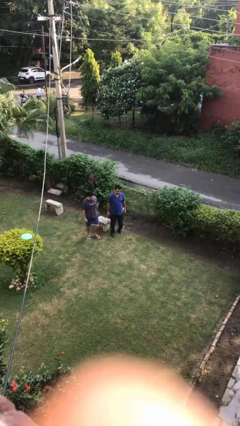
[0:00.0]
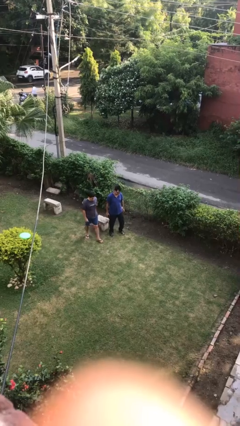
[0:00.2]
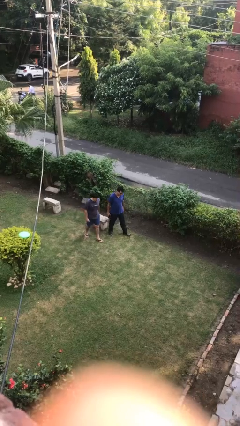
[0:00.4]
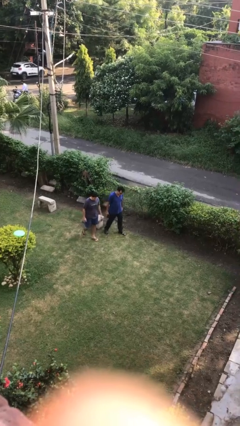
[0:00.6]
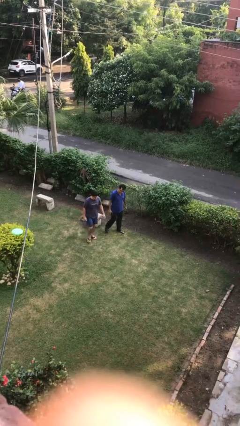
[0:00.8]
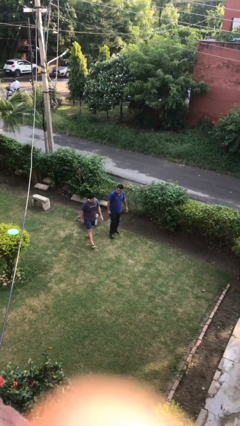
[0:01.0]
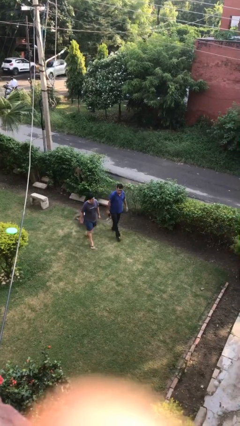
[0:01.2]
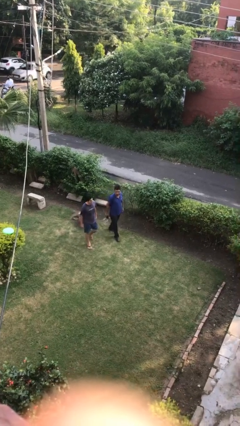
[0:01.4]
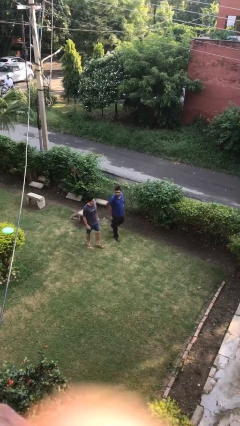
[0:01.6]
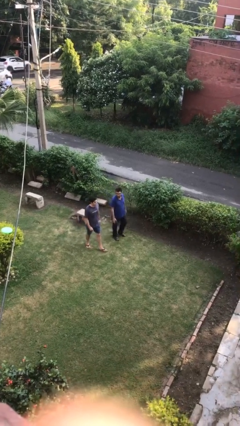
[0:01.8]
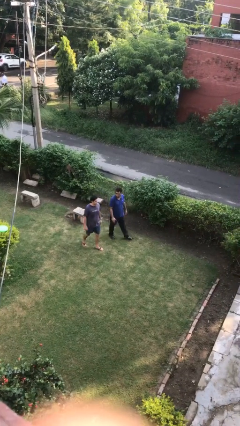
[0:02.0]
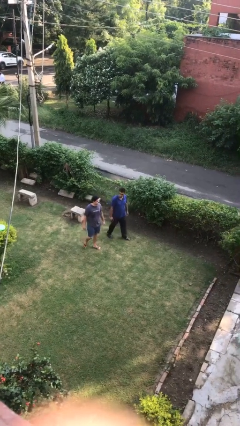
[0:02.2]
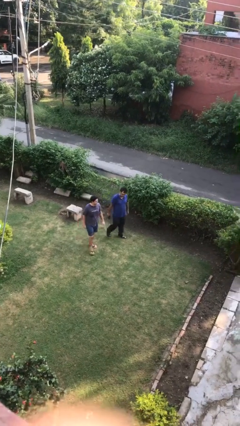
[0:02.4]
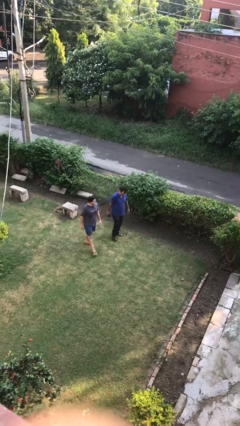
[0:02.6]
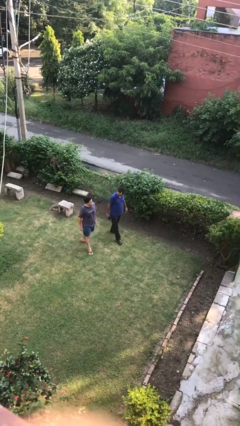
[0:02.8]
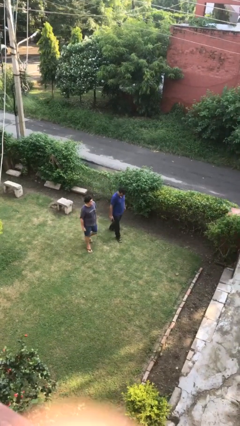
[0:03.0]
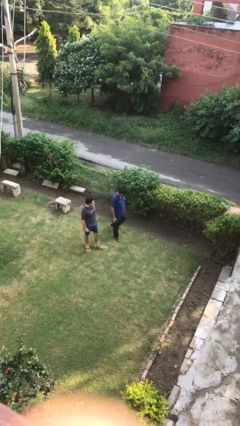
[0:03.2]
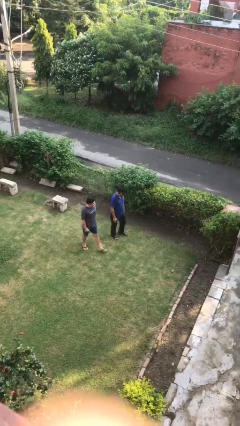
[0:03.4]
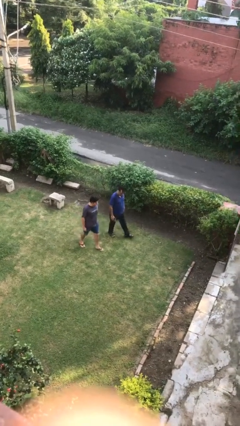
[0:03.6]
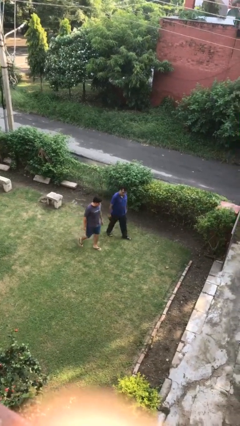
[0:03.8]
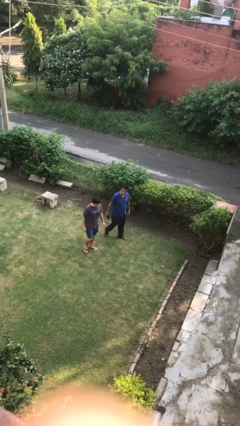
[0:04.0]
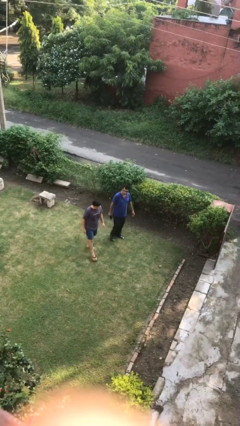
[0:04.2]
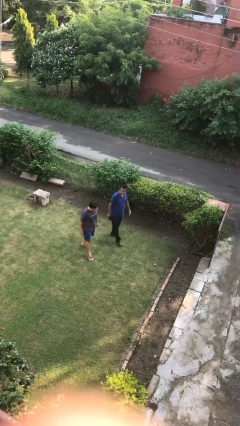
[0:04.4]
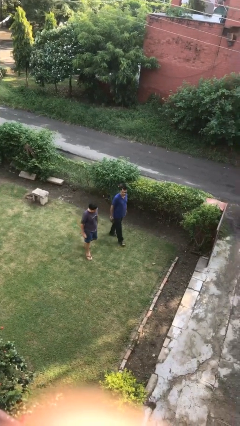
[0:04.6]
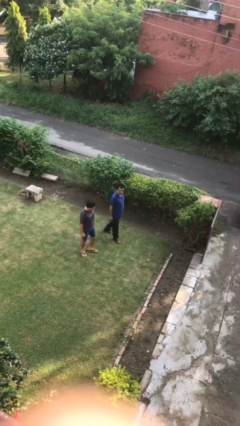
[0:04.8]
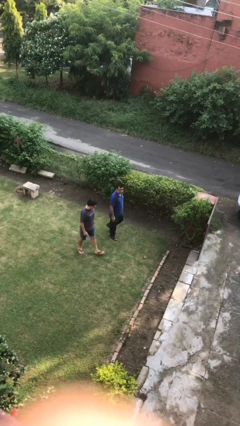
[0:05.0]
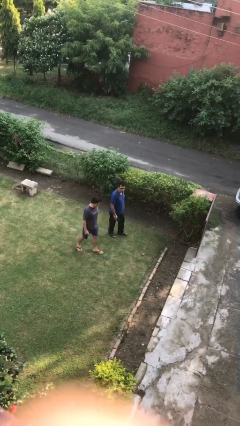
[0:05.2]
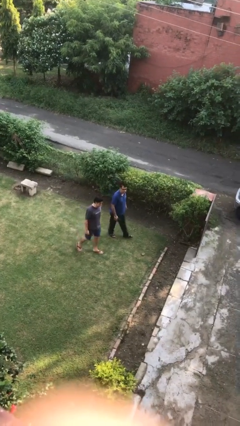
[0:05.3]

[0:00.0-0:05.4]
person talks to person

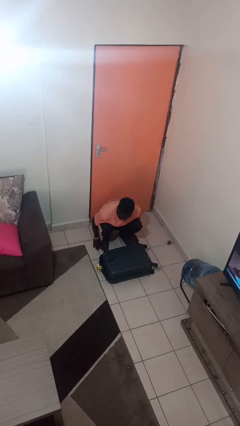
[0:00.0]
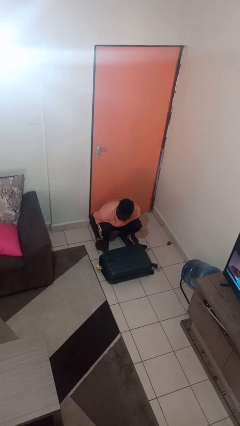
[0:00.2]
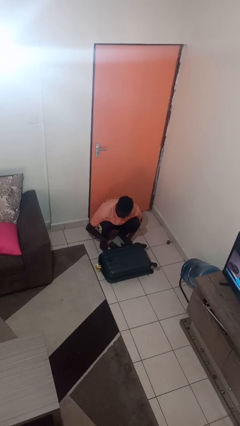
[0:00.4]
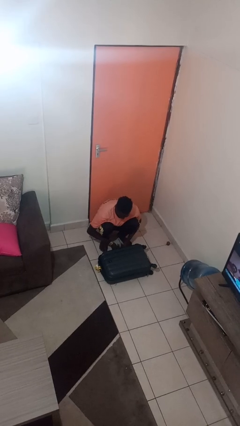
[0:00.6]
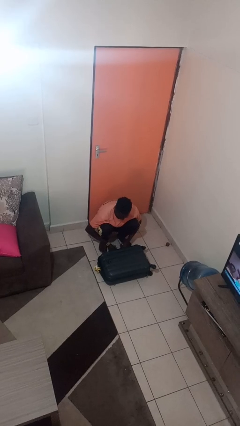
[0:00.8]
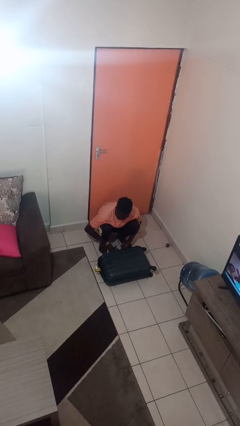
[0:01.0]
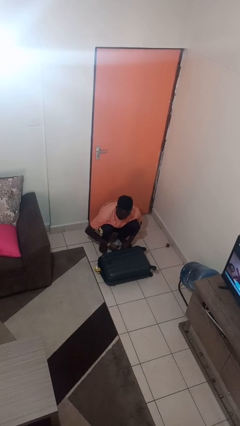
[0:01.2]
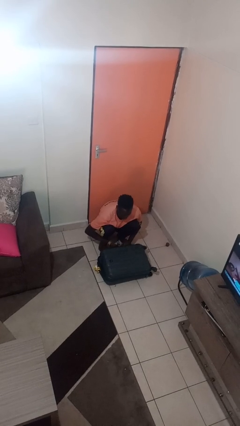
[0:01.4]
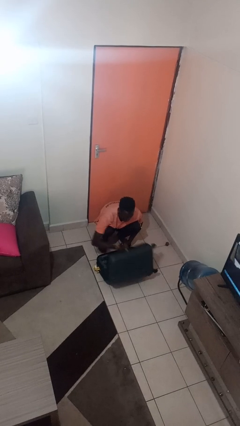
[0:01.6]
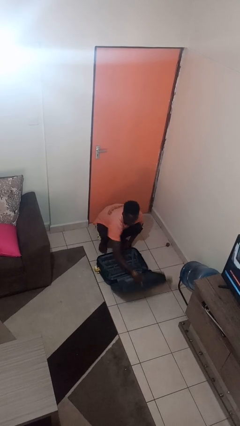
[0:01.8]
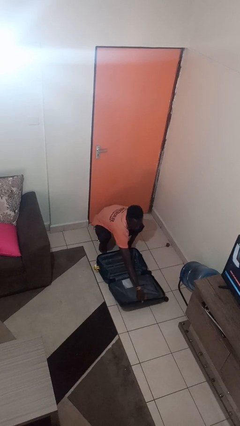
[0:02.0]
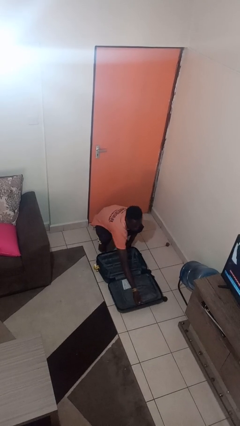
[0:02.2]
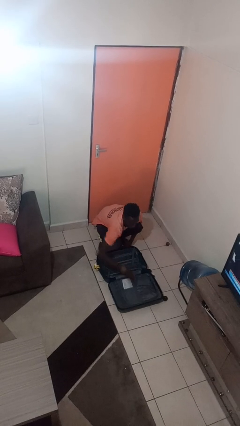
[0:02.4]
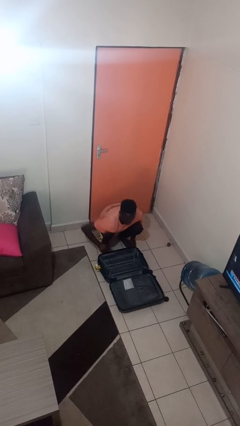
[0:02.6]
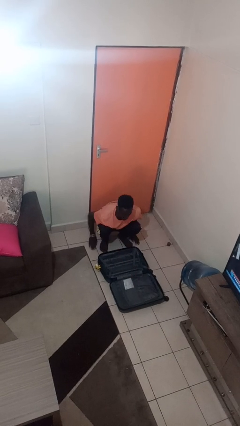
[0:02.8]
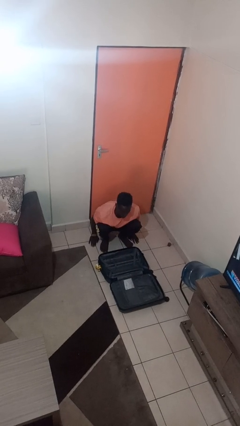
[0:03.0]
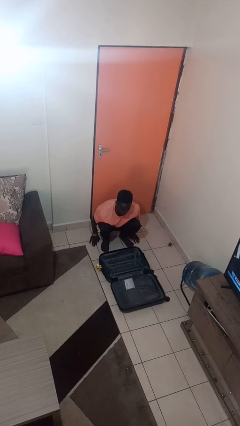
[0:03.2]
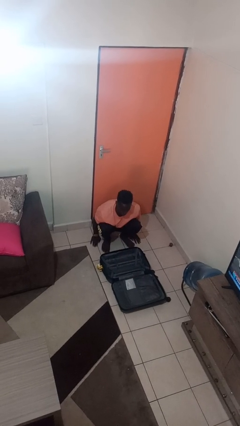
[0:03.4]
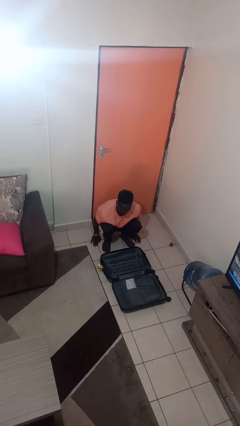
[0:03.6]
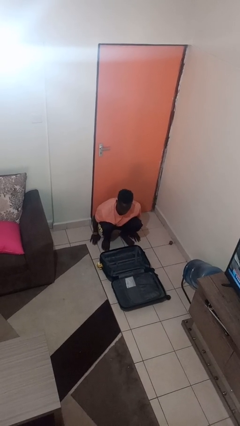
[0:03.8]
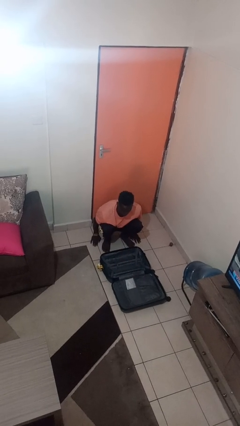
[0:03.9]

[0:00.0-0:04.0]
person opens suitcase

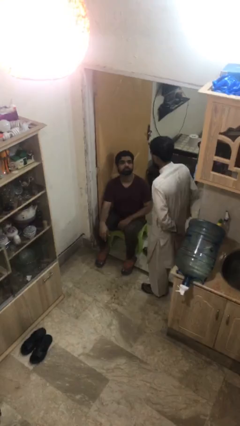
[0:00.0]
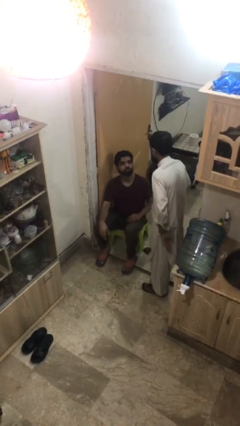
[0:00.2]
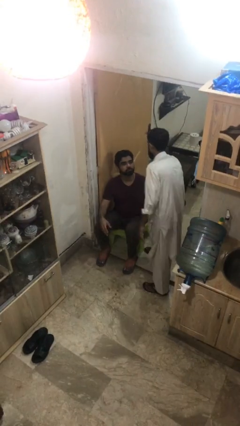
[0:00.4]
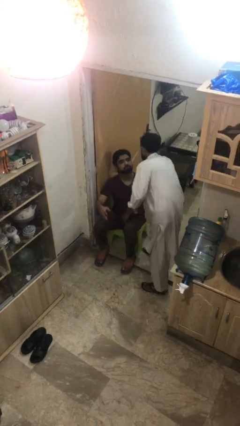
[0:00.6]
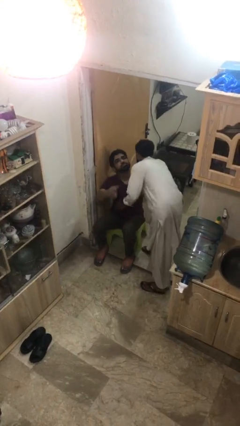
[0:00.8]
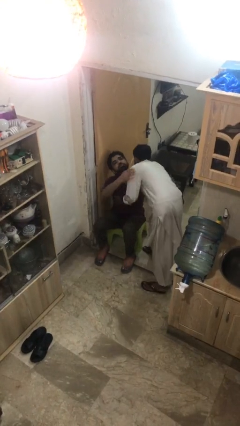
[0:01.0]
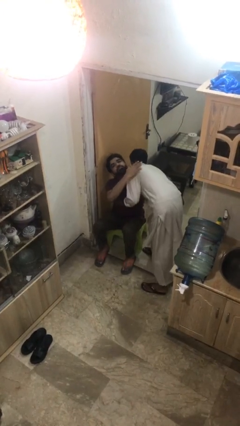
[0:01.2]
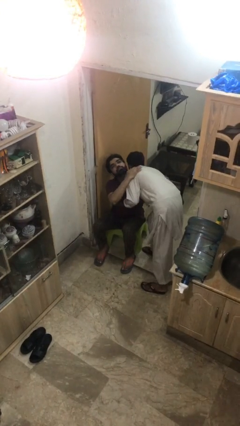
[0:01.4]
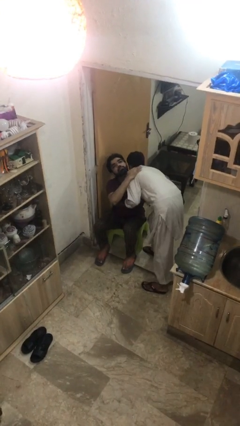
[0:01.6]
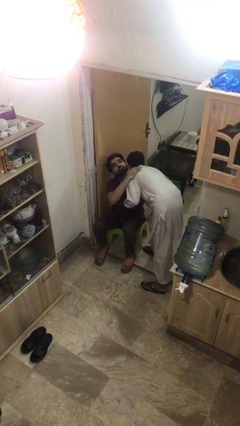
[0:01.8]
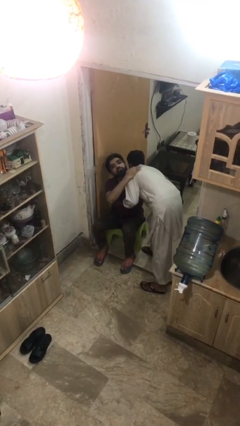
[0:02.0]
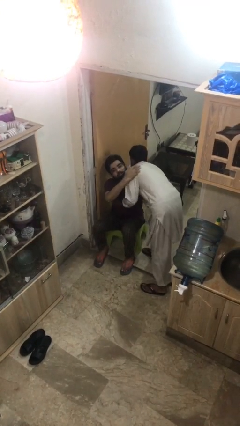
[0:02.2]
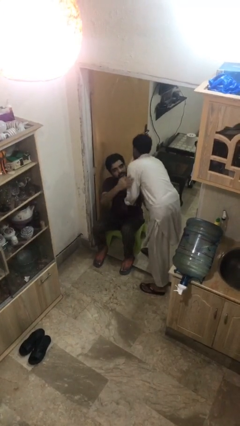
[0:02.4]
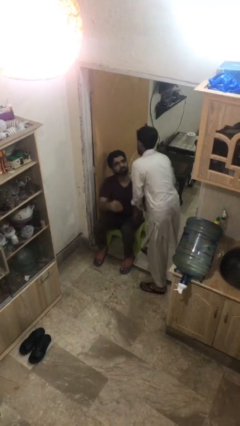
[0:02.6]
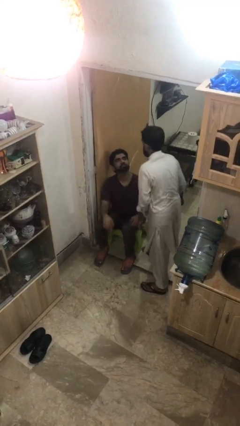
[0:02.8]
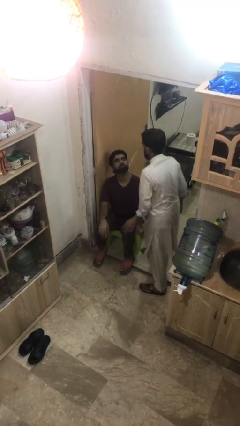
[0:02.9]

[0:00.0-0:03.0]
person embraces person

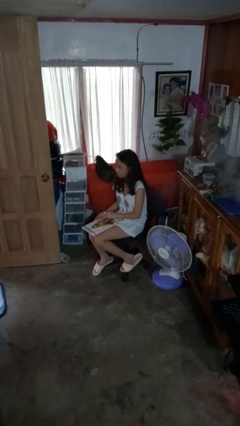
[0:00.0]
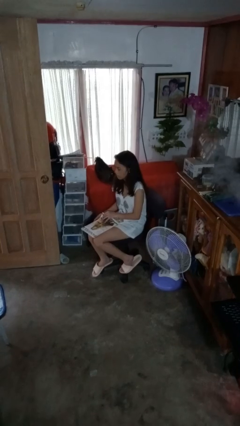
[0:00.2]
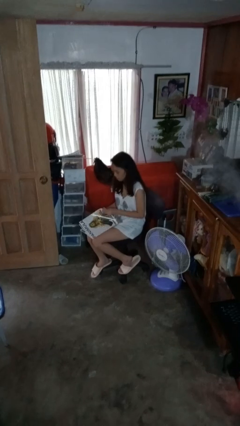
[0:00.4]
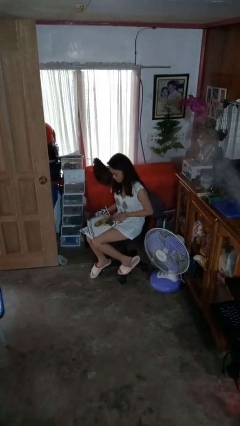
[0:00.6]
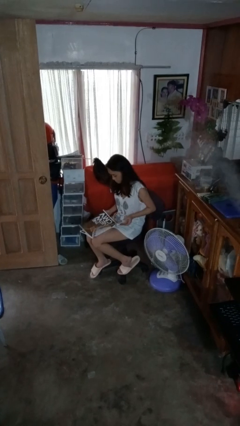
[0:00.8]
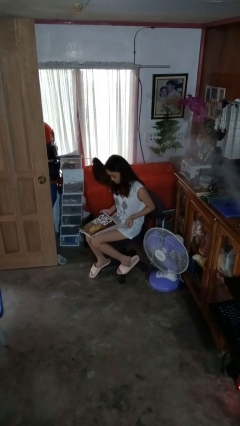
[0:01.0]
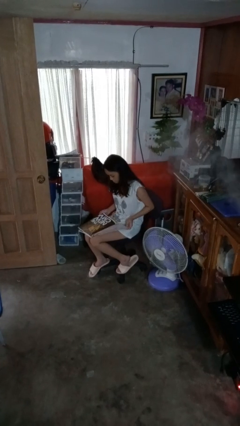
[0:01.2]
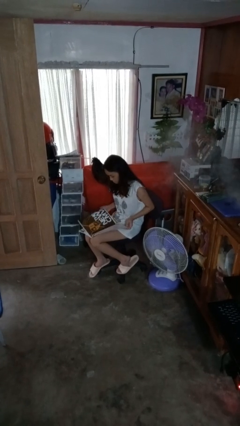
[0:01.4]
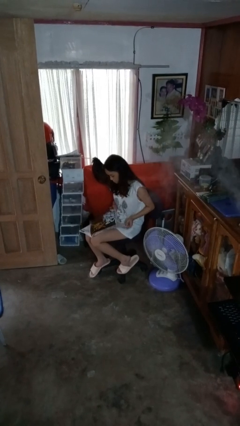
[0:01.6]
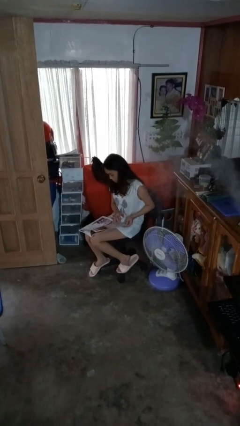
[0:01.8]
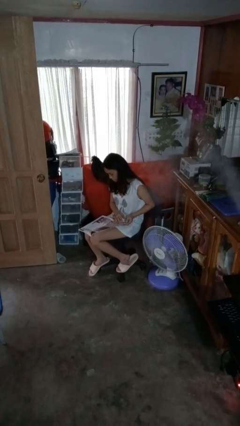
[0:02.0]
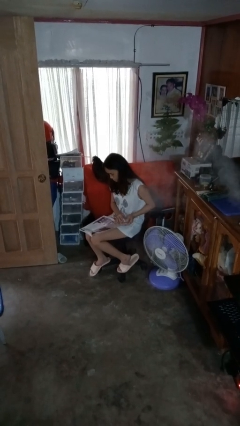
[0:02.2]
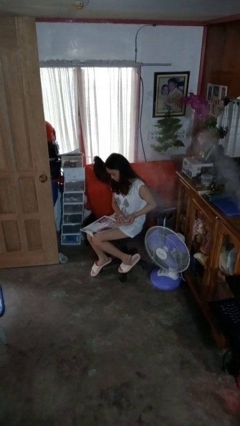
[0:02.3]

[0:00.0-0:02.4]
person reads magazine

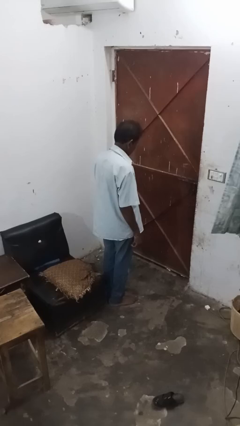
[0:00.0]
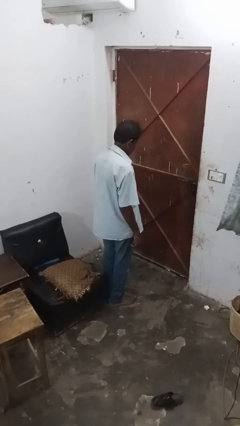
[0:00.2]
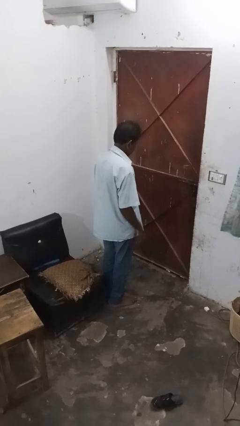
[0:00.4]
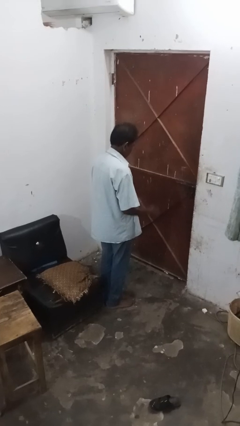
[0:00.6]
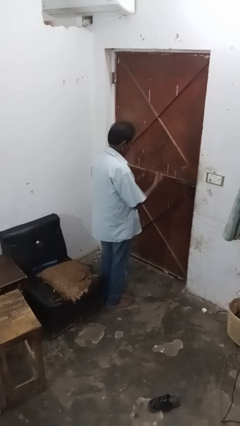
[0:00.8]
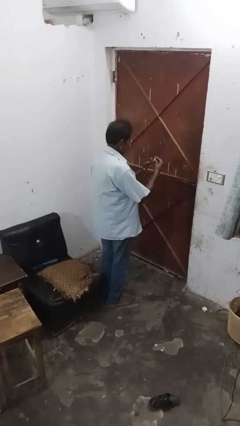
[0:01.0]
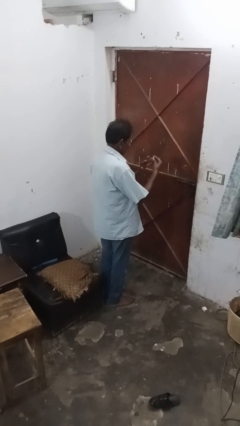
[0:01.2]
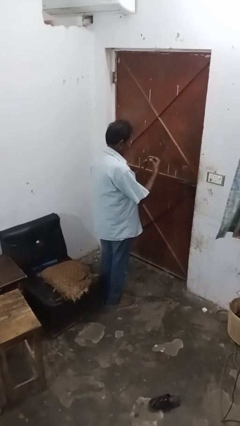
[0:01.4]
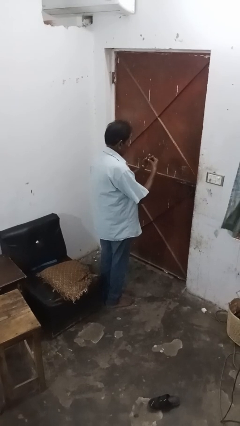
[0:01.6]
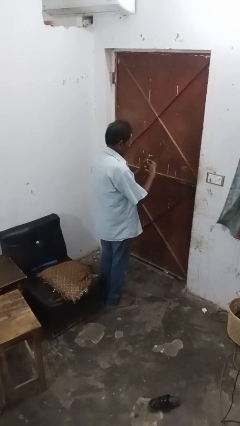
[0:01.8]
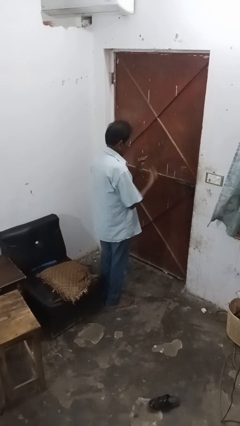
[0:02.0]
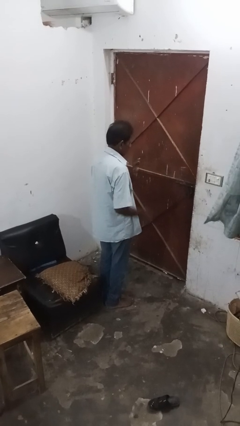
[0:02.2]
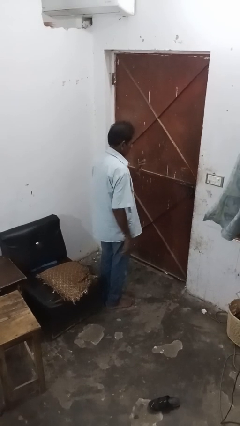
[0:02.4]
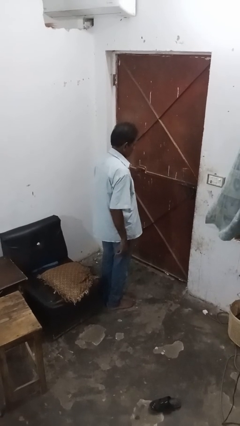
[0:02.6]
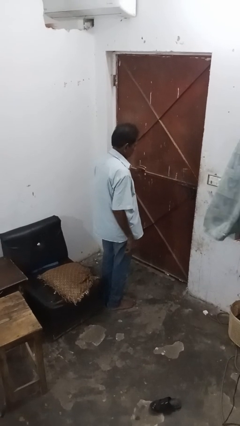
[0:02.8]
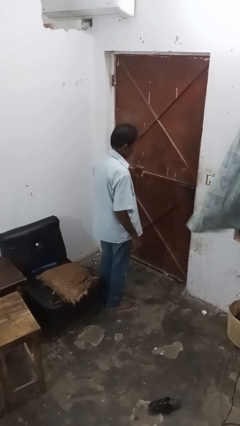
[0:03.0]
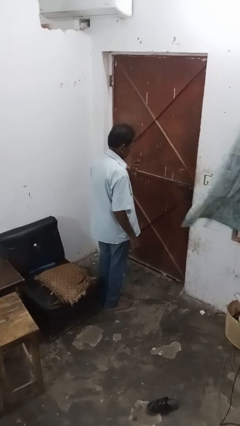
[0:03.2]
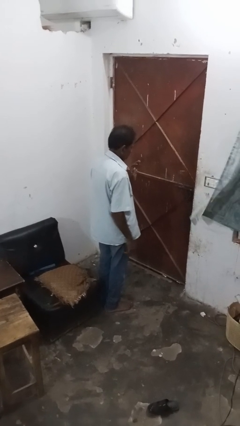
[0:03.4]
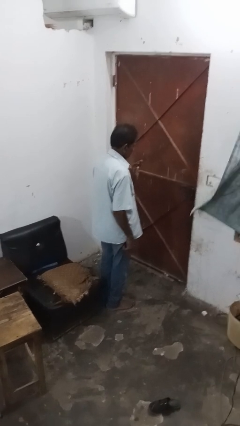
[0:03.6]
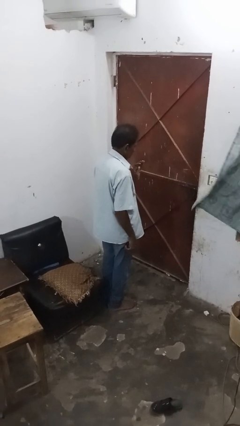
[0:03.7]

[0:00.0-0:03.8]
person puts on ring
